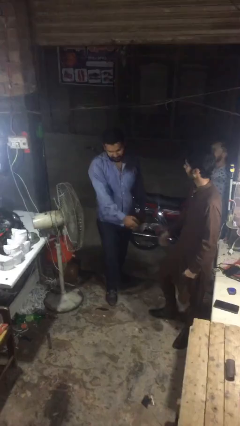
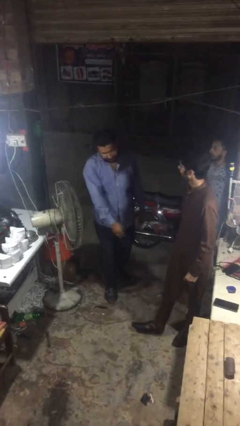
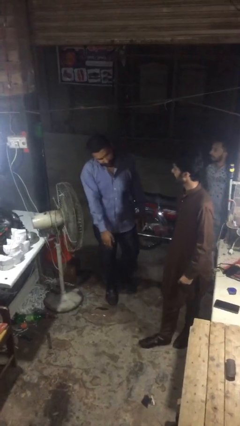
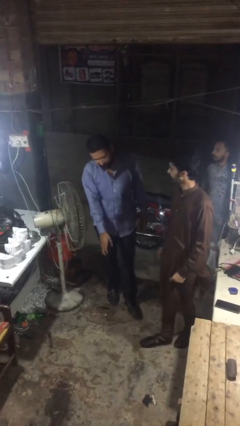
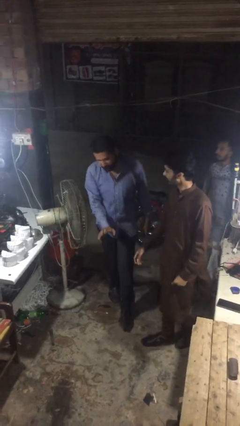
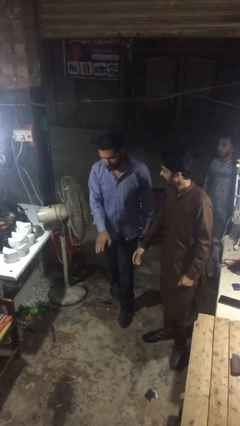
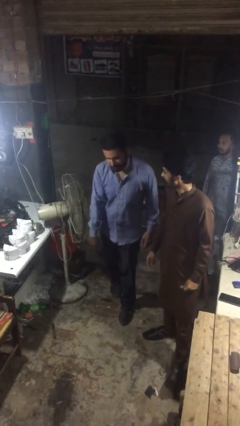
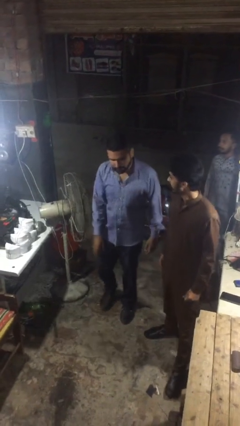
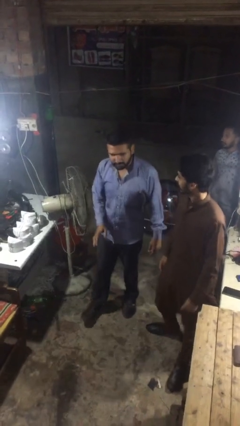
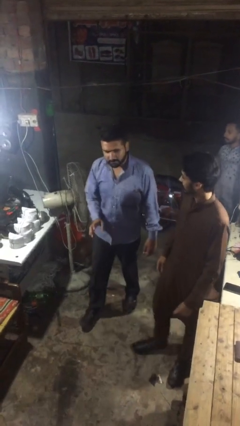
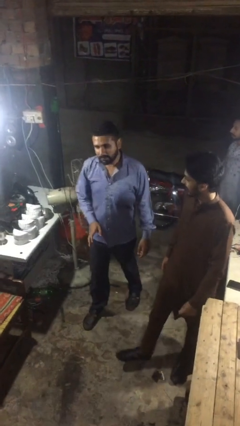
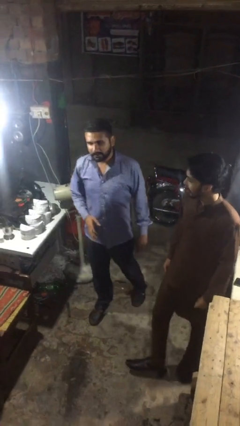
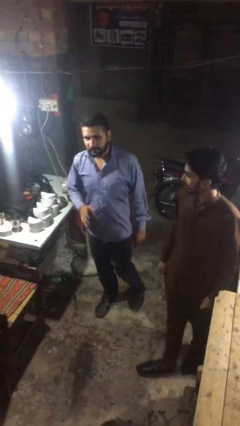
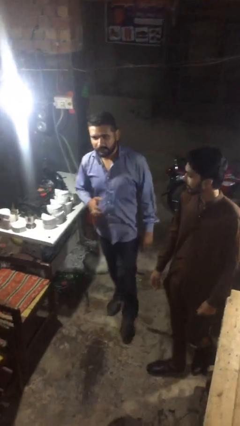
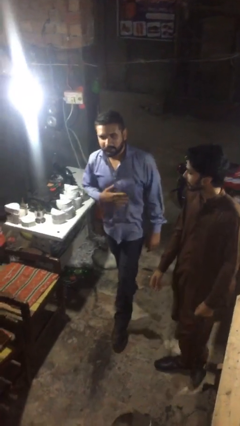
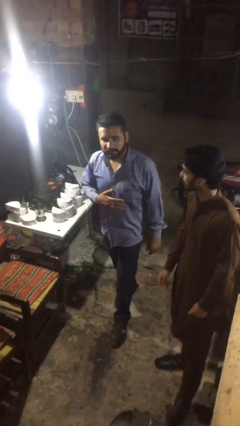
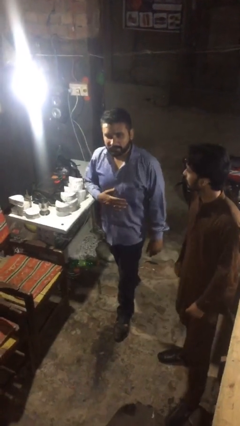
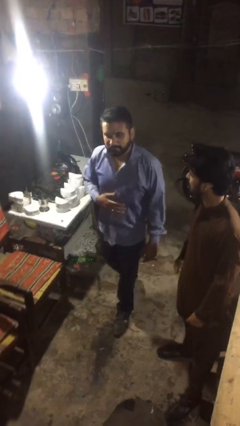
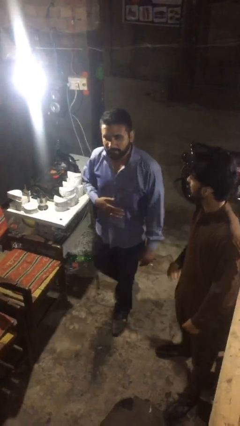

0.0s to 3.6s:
person talks to person

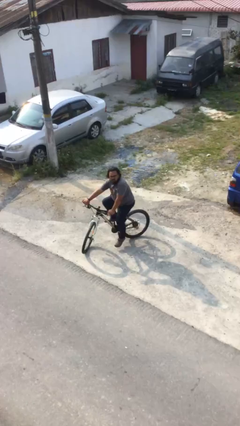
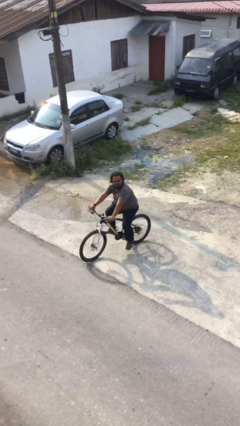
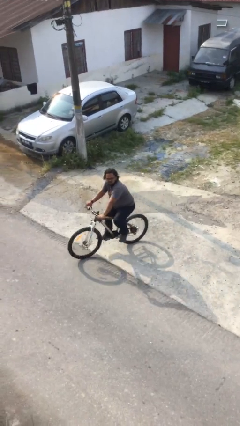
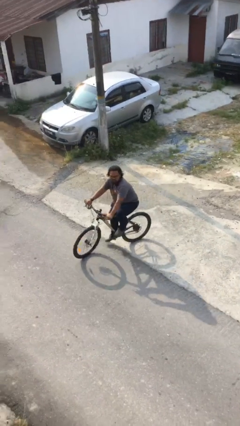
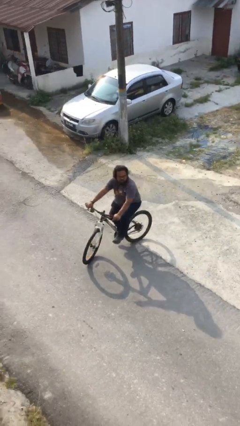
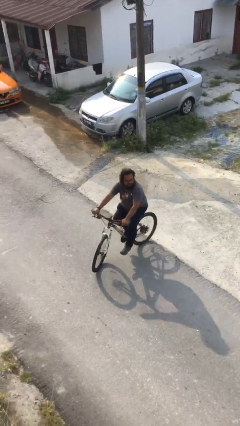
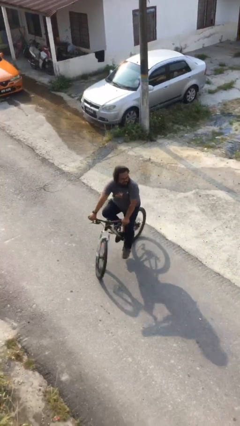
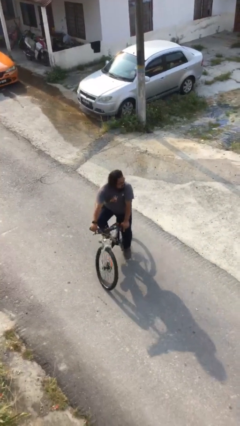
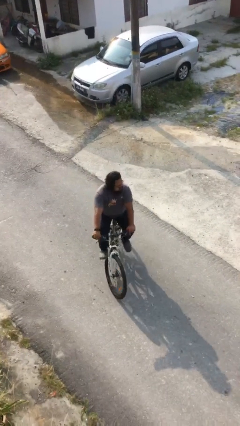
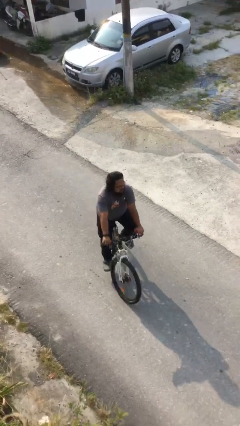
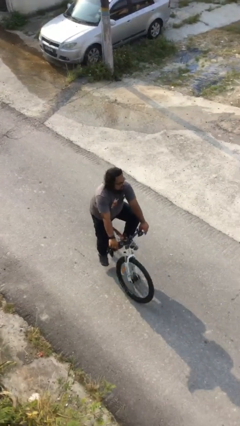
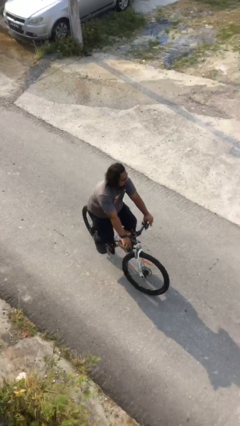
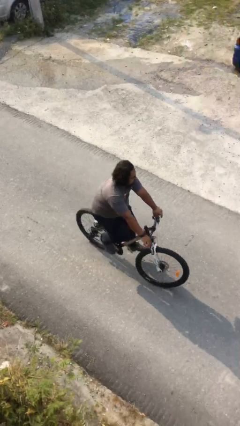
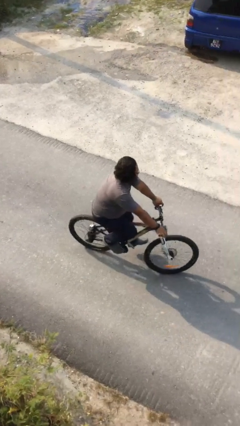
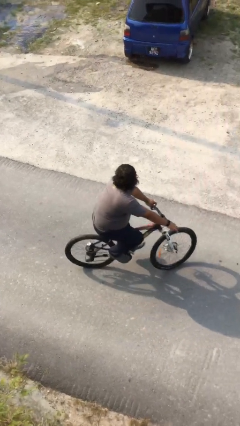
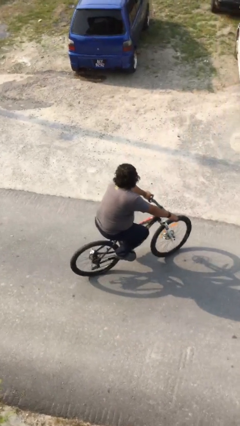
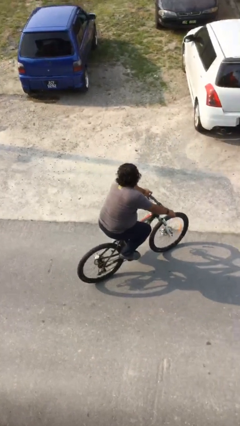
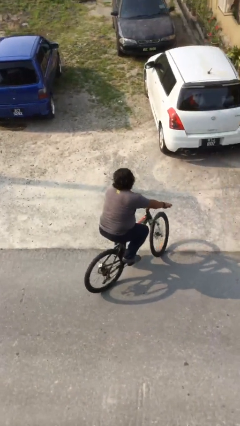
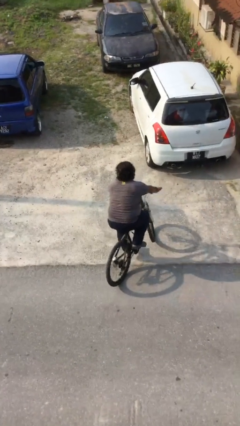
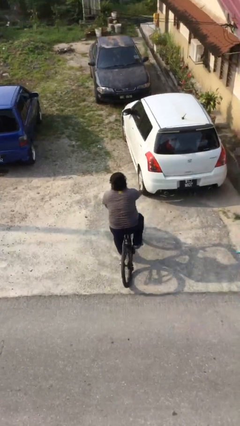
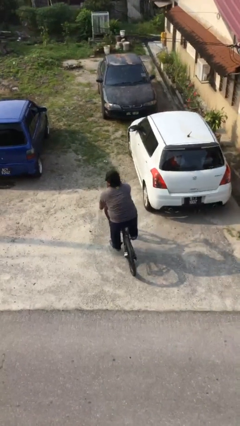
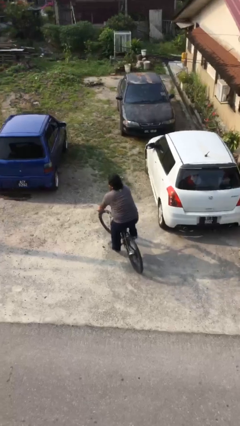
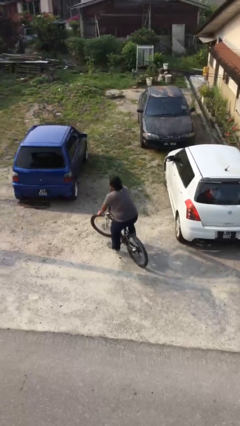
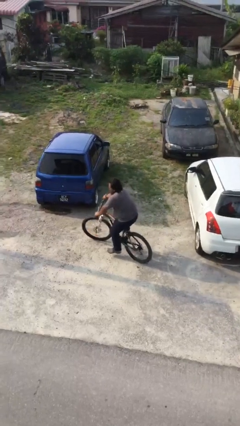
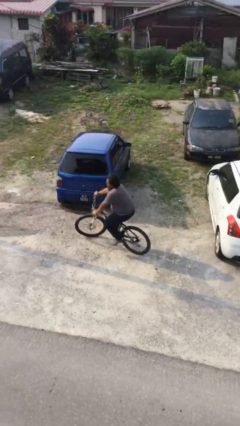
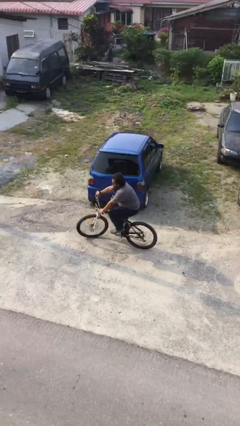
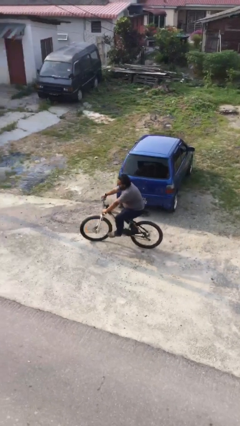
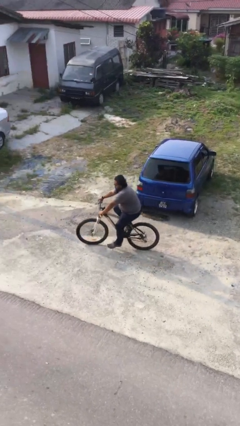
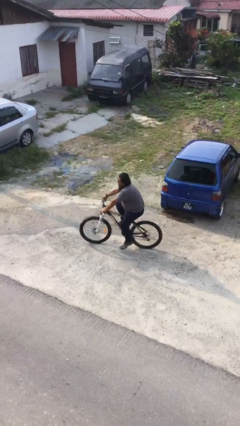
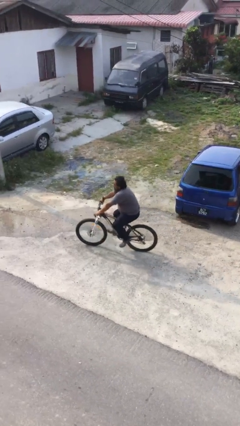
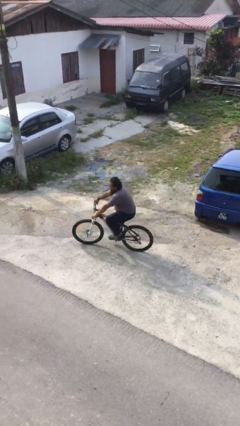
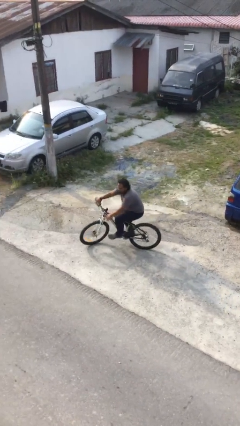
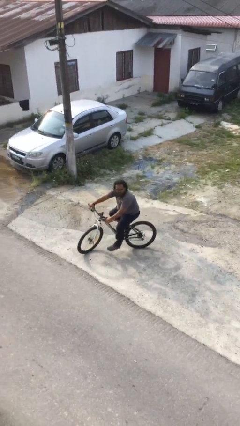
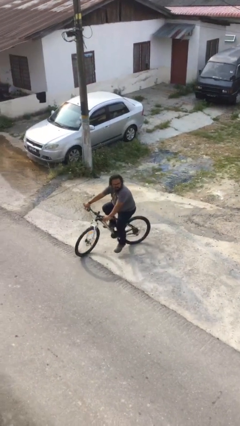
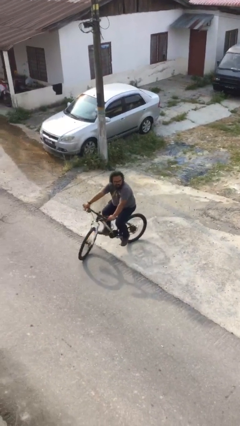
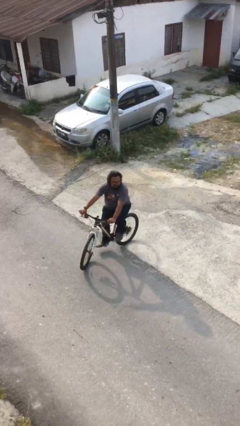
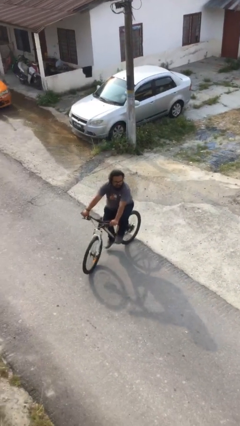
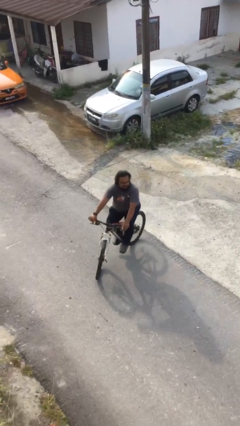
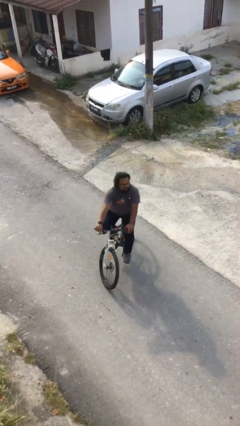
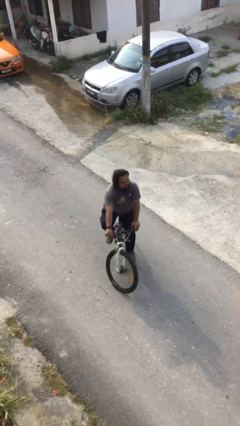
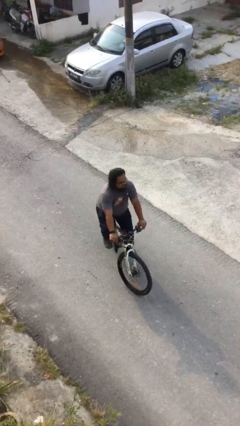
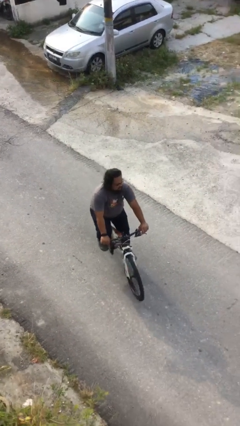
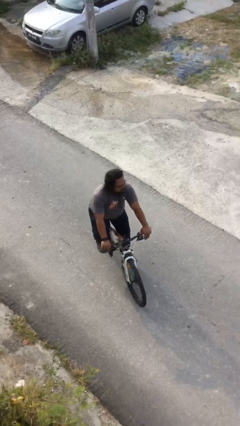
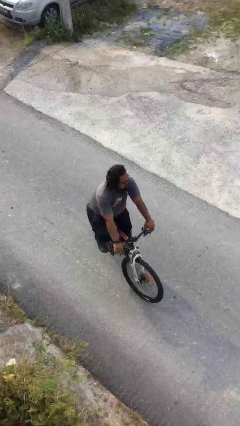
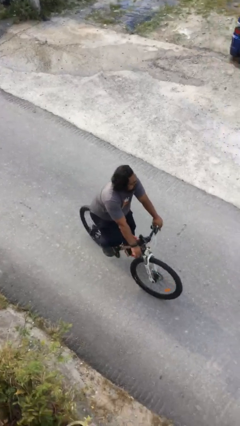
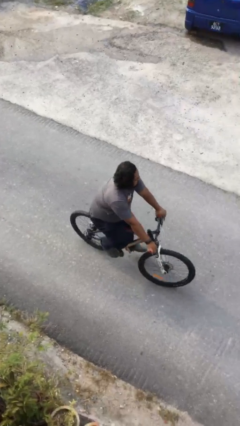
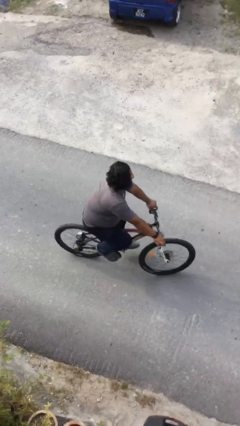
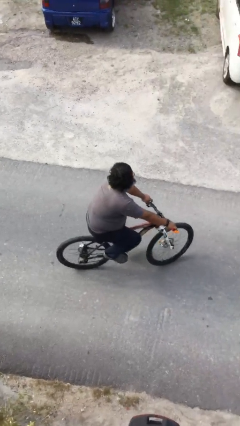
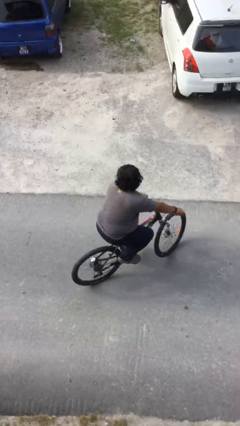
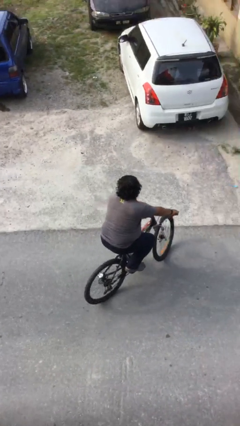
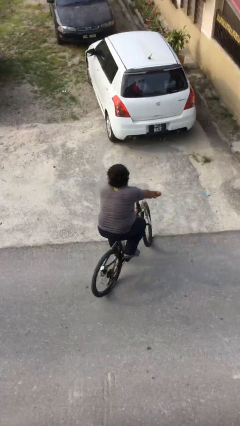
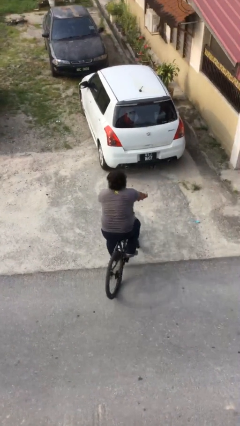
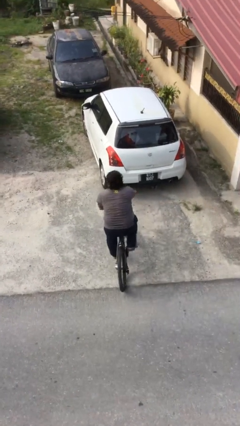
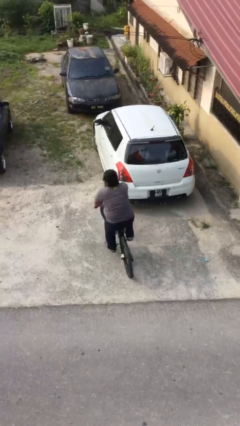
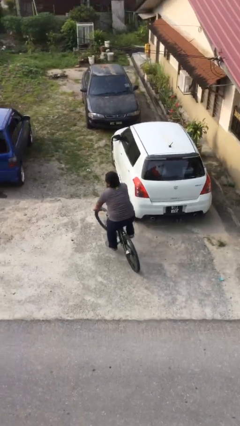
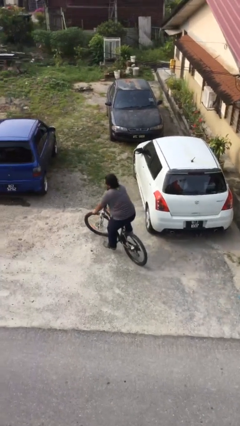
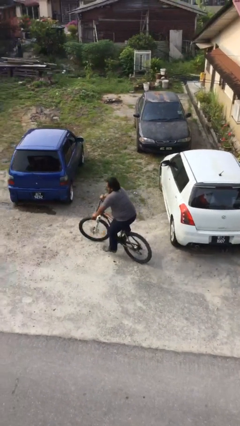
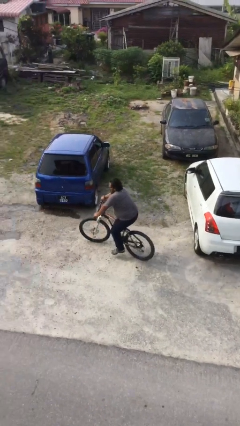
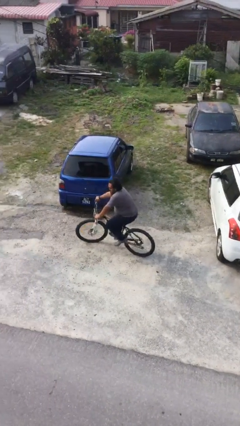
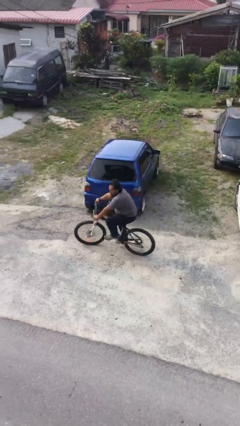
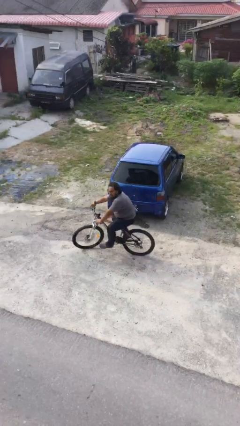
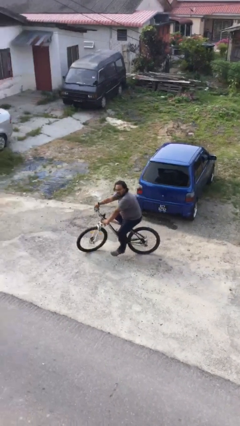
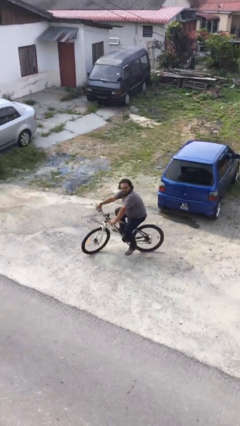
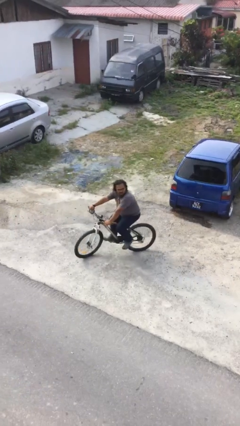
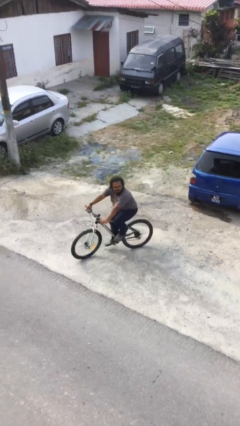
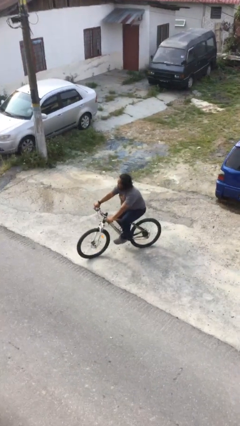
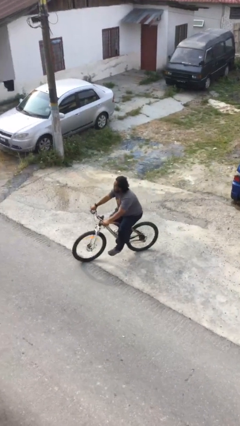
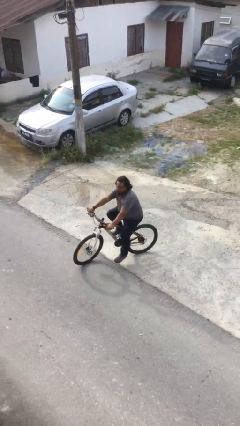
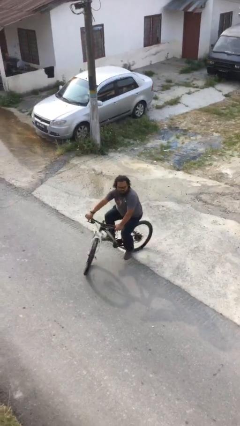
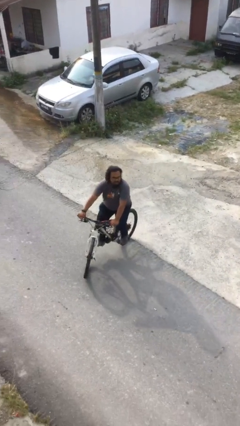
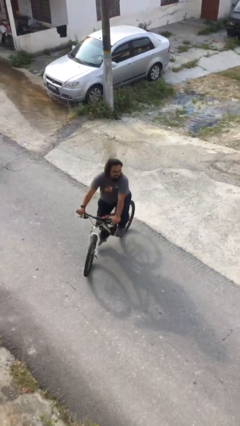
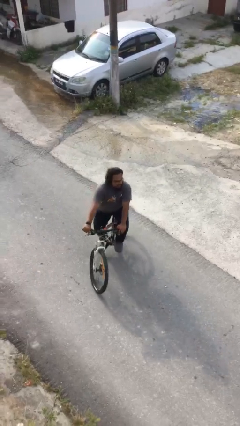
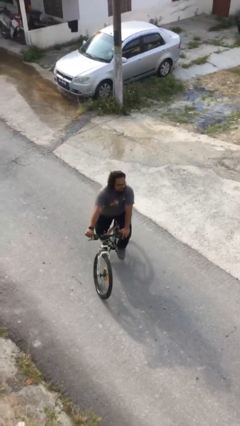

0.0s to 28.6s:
person rides bicycle

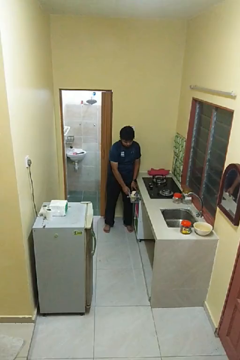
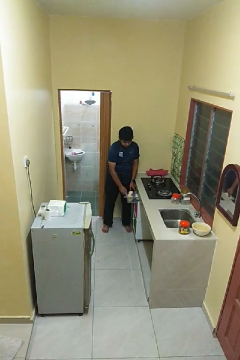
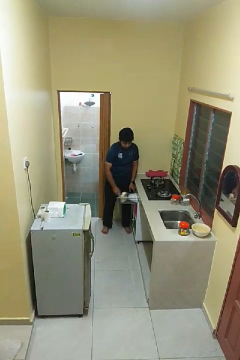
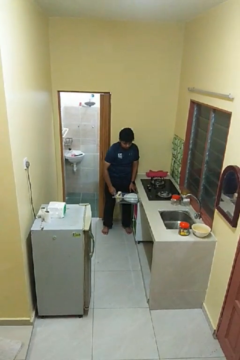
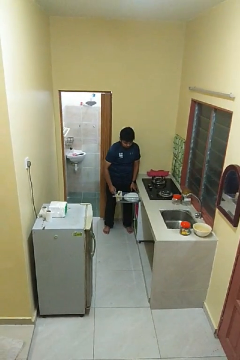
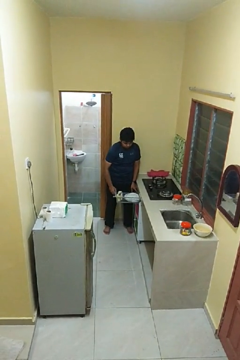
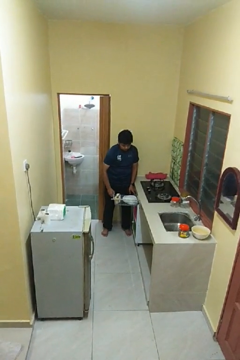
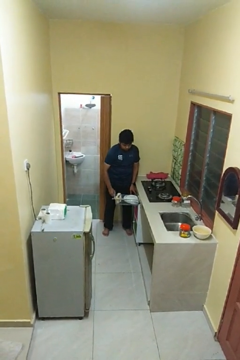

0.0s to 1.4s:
person opens kitchen drawer
